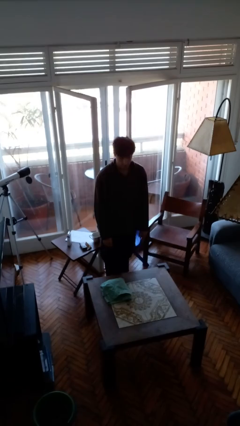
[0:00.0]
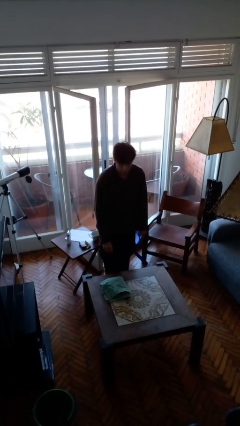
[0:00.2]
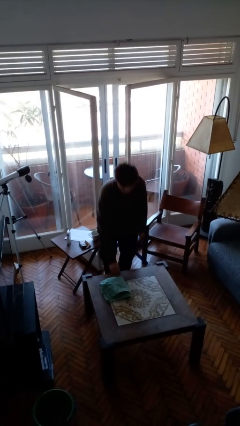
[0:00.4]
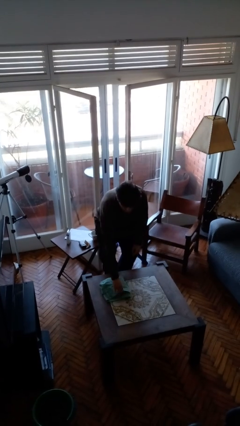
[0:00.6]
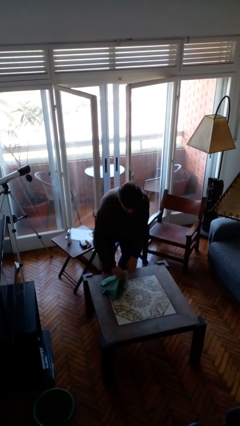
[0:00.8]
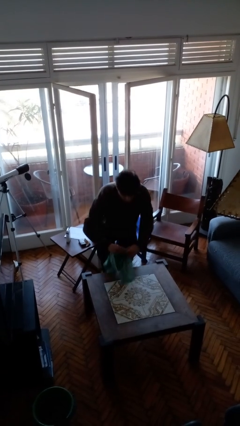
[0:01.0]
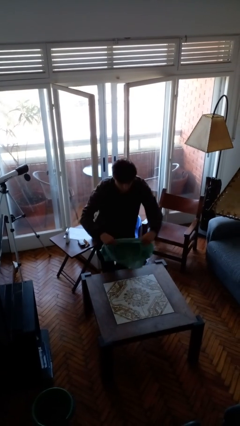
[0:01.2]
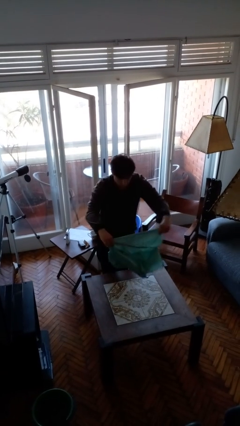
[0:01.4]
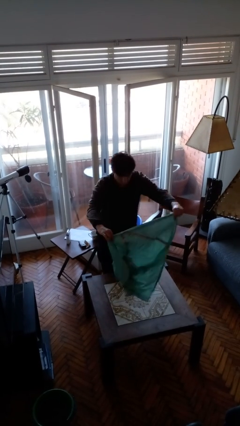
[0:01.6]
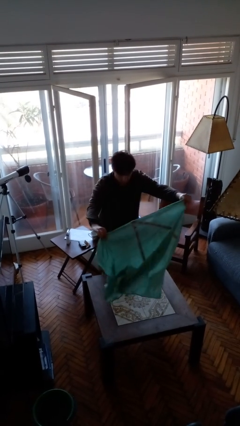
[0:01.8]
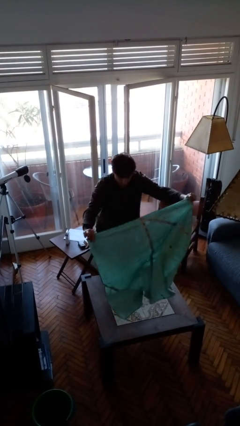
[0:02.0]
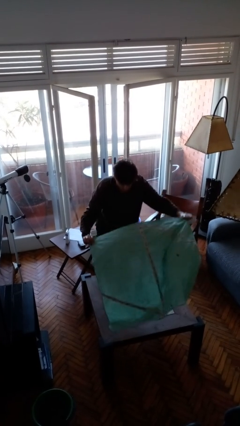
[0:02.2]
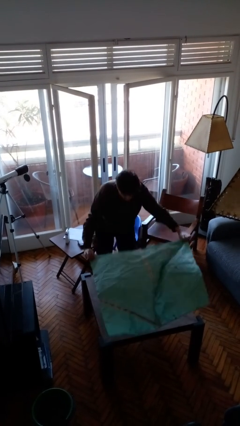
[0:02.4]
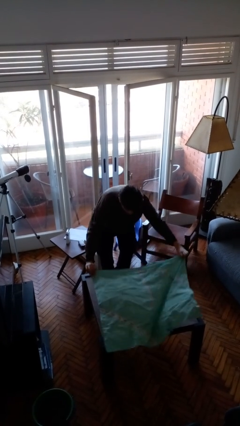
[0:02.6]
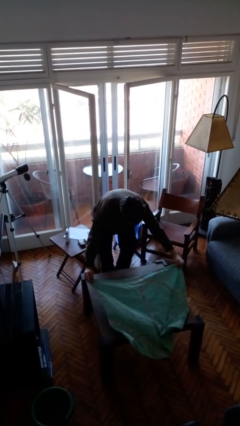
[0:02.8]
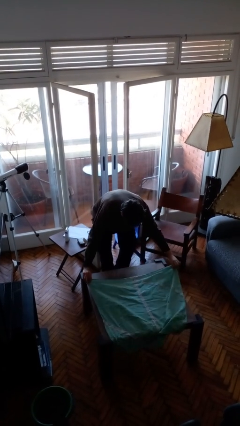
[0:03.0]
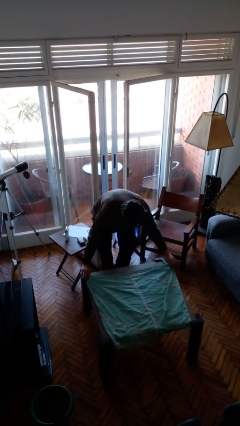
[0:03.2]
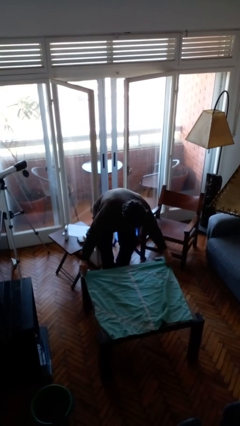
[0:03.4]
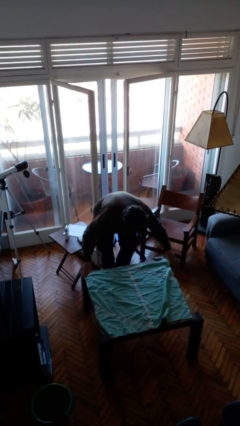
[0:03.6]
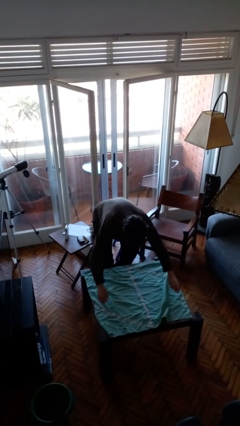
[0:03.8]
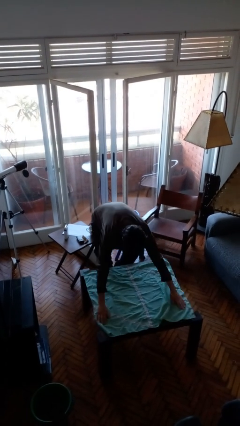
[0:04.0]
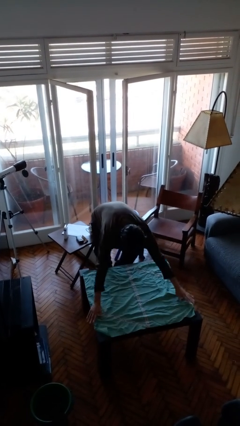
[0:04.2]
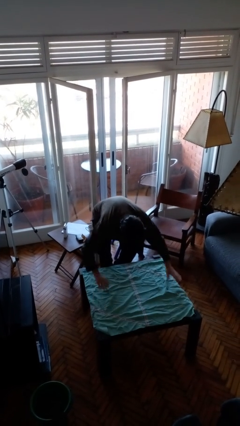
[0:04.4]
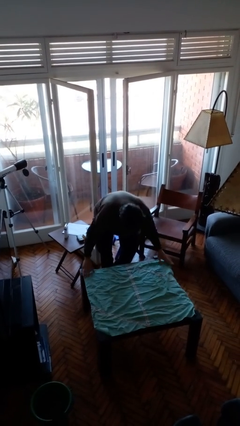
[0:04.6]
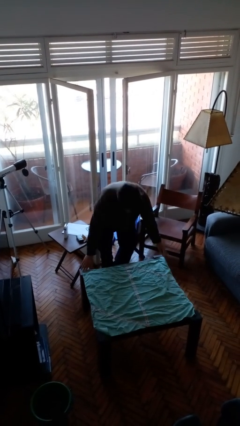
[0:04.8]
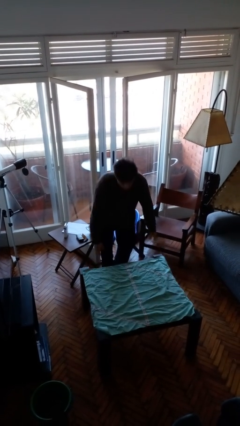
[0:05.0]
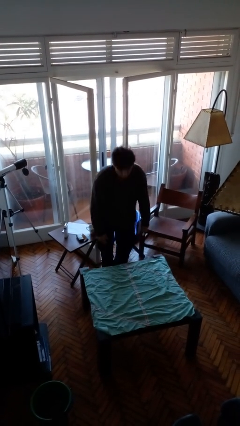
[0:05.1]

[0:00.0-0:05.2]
person spreads tablecloth

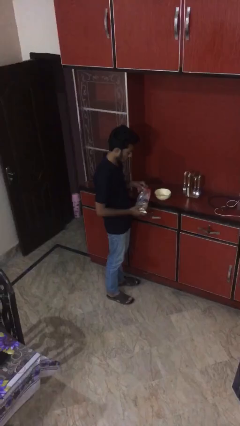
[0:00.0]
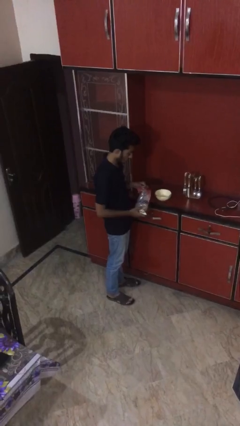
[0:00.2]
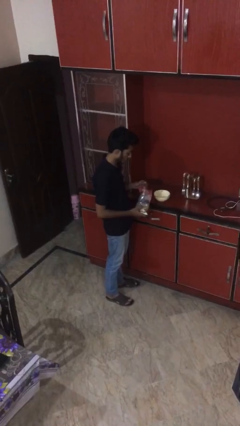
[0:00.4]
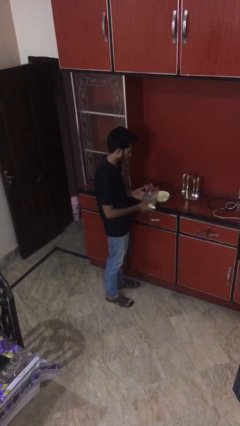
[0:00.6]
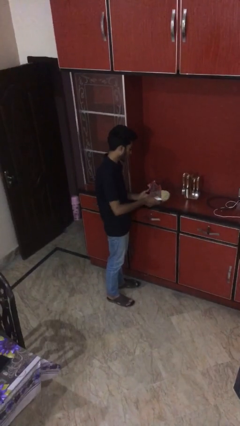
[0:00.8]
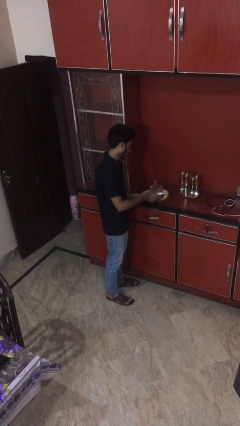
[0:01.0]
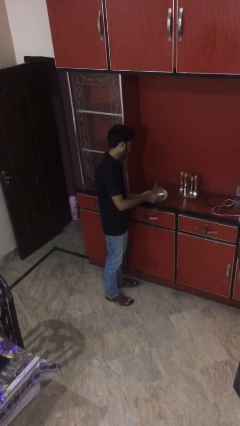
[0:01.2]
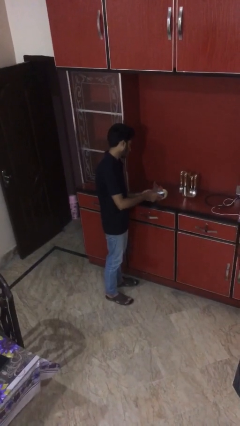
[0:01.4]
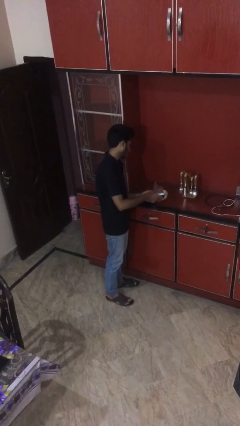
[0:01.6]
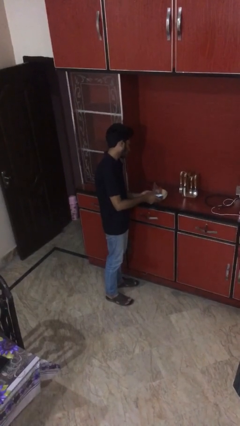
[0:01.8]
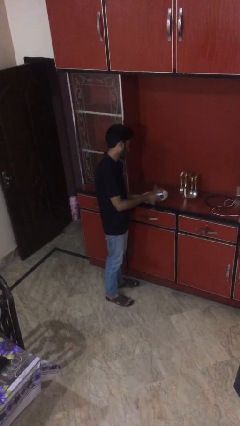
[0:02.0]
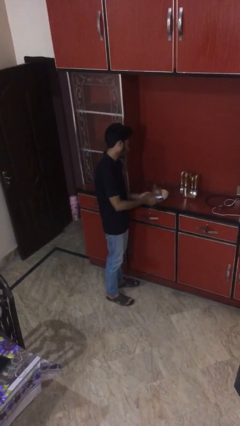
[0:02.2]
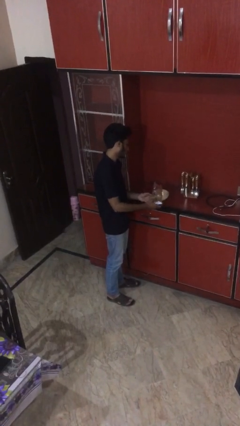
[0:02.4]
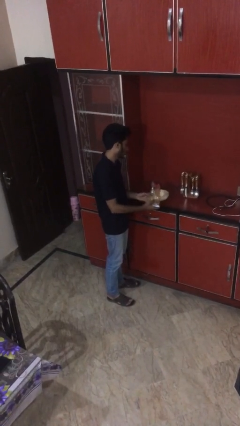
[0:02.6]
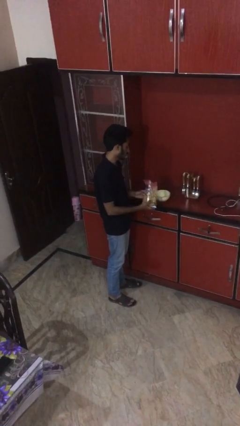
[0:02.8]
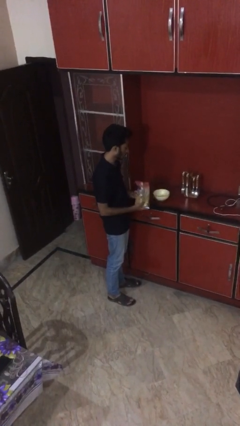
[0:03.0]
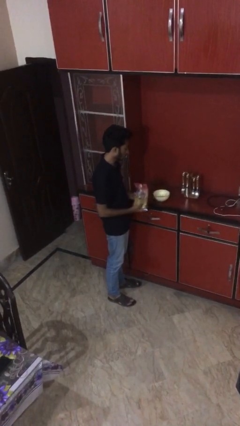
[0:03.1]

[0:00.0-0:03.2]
person pours into bowl

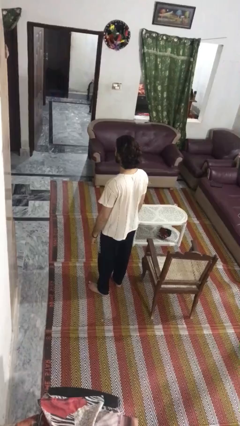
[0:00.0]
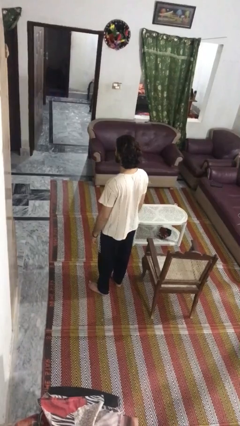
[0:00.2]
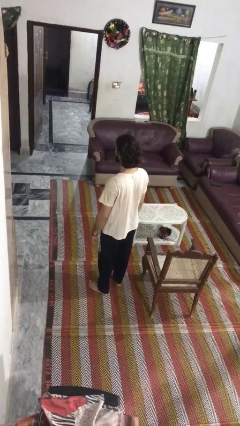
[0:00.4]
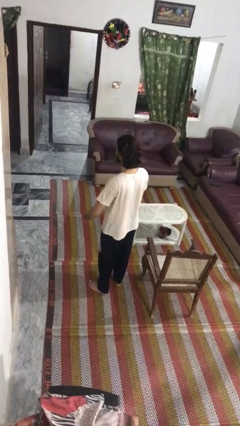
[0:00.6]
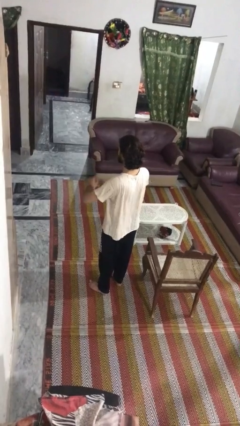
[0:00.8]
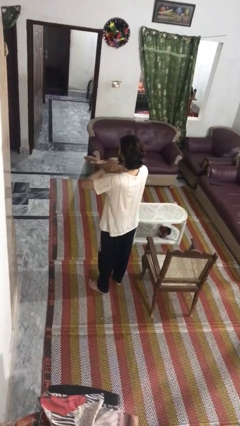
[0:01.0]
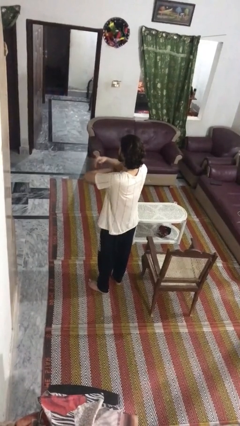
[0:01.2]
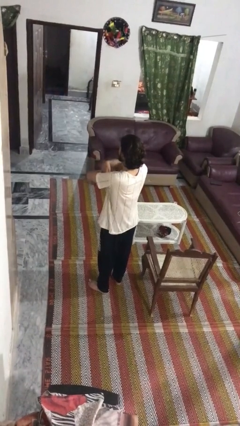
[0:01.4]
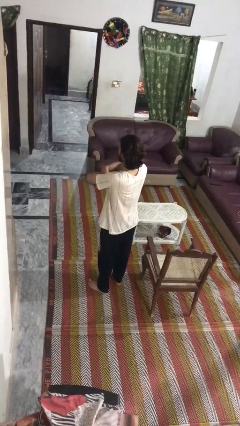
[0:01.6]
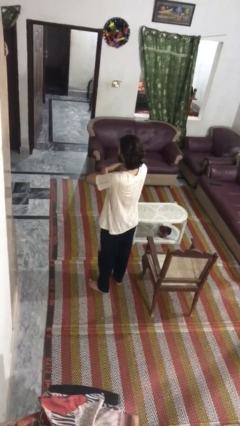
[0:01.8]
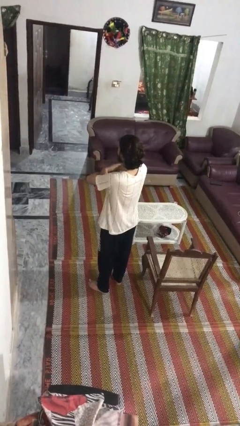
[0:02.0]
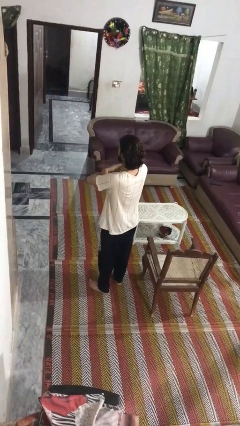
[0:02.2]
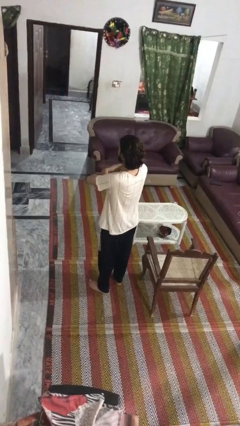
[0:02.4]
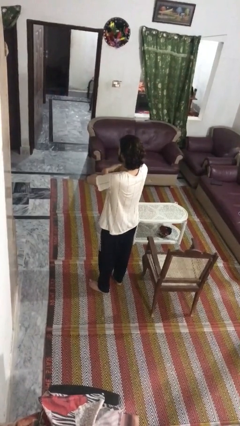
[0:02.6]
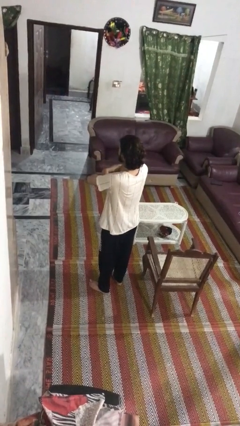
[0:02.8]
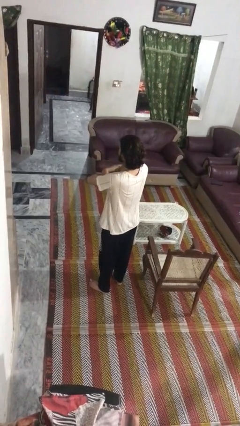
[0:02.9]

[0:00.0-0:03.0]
person crosses arms

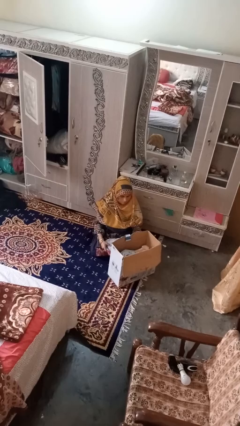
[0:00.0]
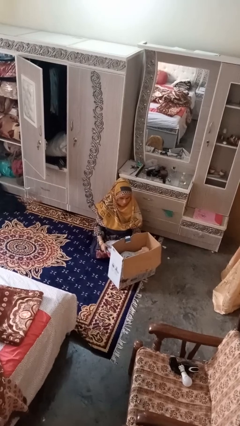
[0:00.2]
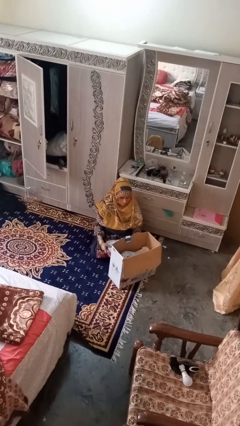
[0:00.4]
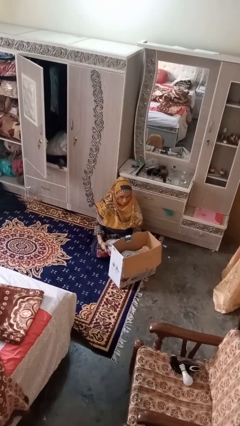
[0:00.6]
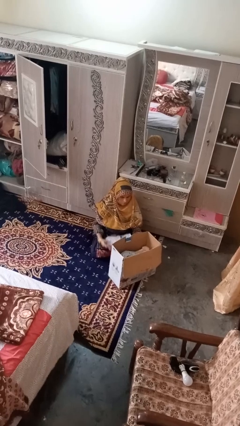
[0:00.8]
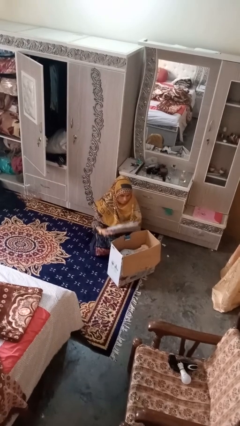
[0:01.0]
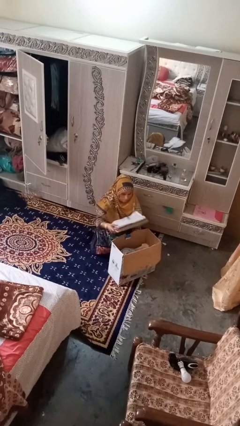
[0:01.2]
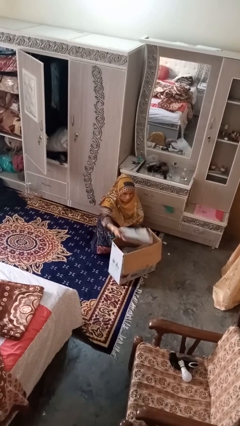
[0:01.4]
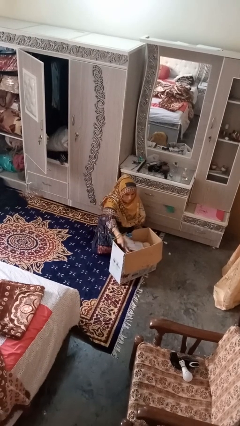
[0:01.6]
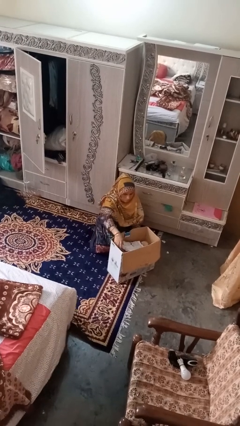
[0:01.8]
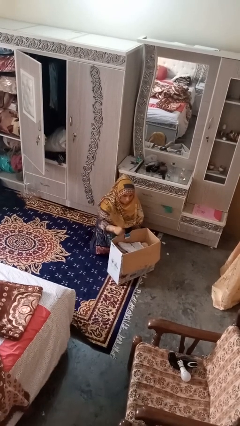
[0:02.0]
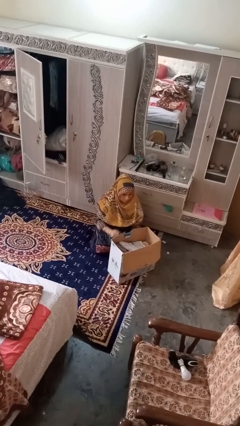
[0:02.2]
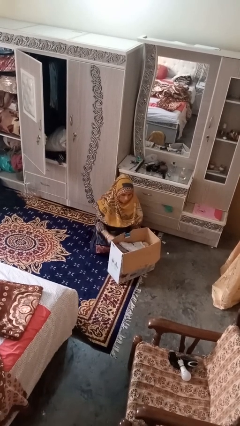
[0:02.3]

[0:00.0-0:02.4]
person puts object into box

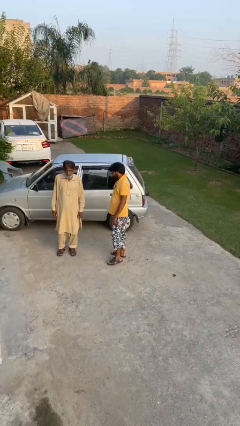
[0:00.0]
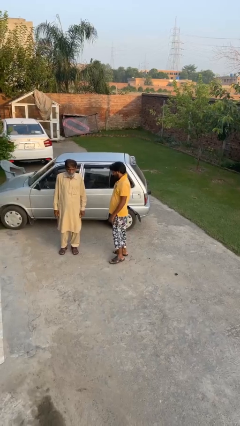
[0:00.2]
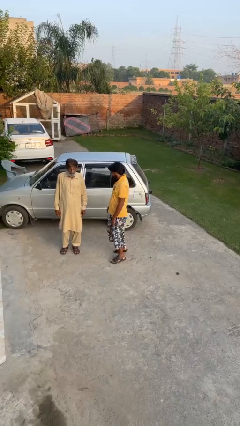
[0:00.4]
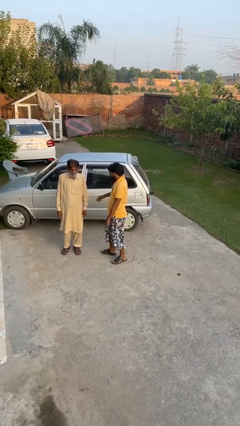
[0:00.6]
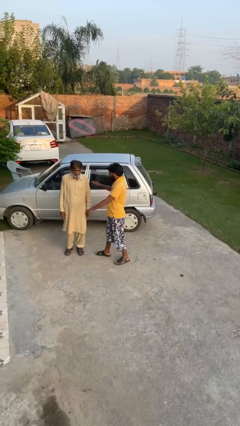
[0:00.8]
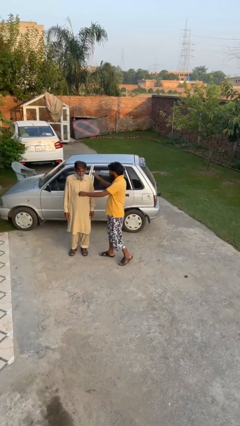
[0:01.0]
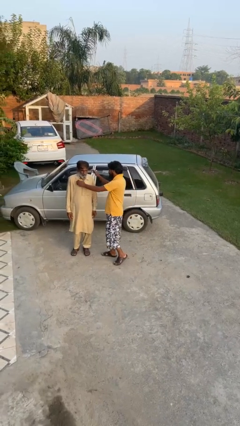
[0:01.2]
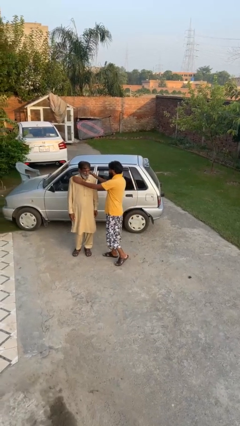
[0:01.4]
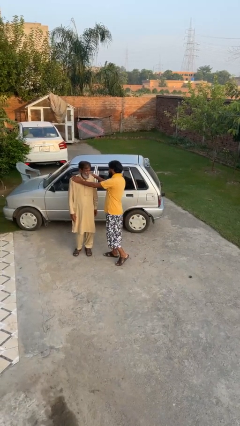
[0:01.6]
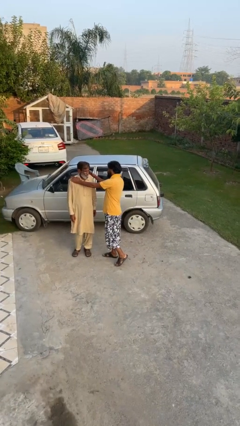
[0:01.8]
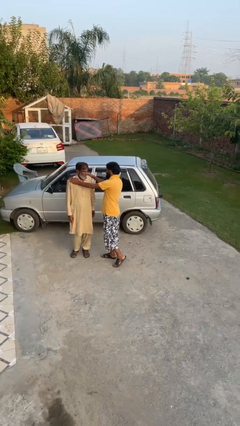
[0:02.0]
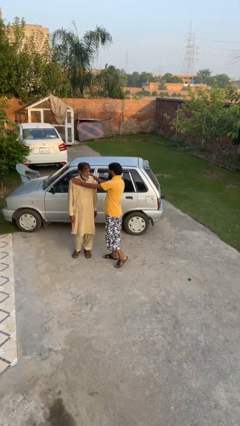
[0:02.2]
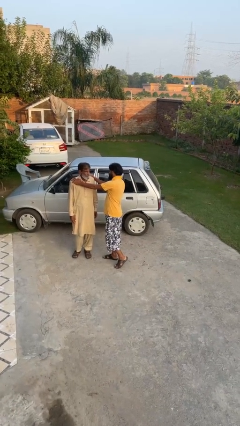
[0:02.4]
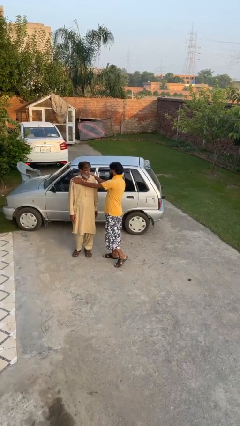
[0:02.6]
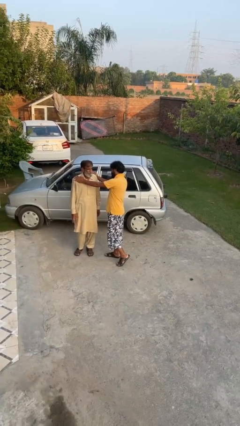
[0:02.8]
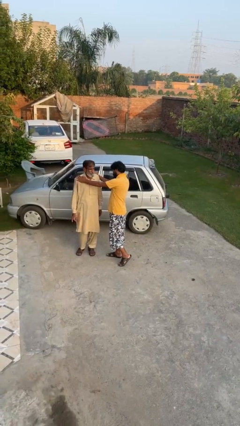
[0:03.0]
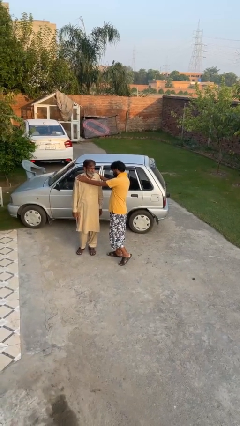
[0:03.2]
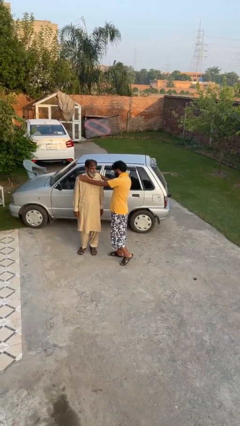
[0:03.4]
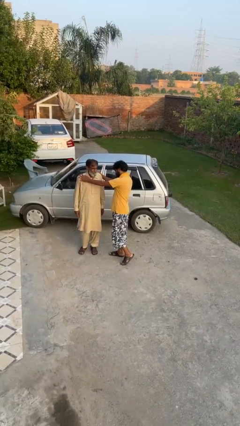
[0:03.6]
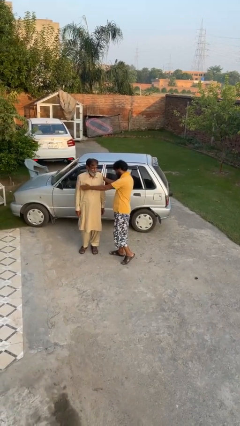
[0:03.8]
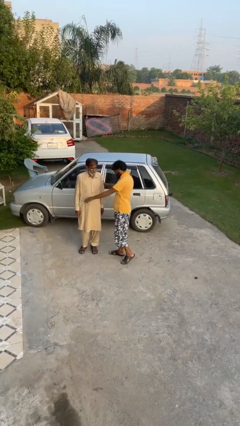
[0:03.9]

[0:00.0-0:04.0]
person pounds shoulders of person
